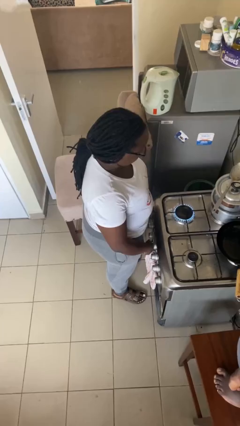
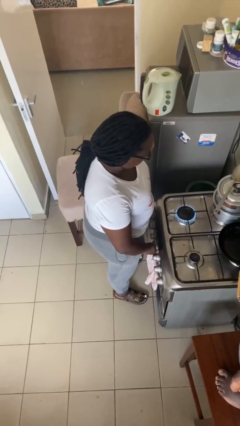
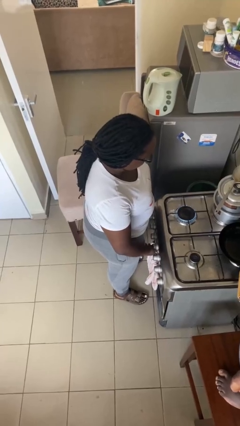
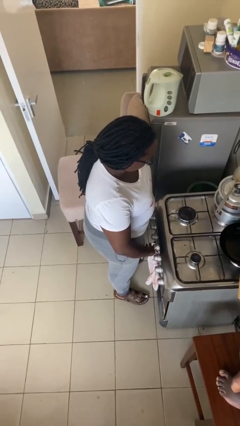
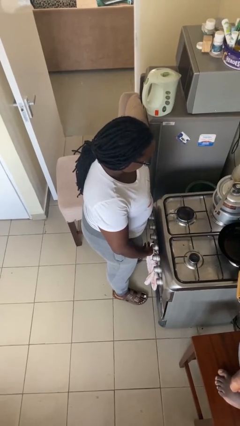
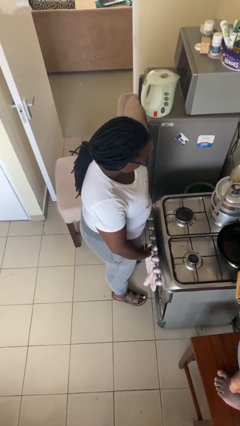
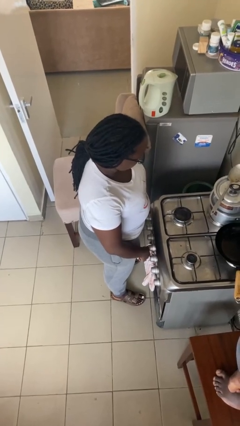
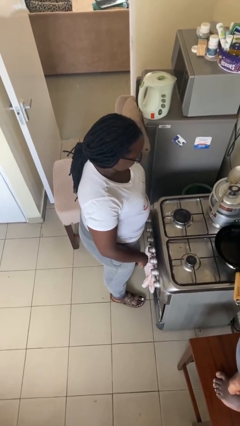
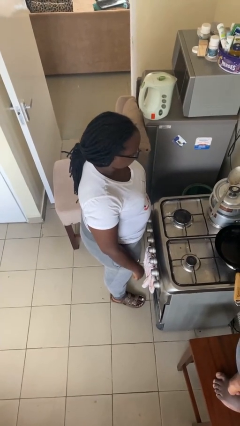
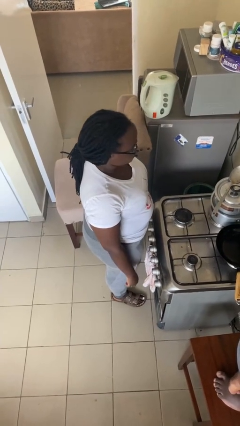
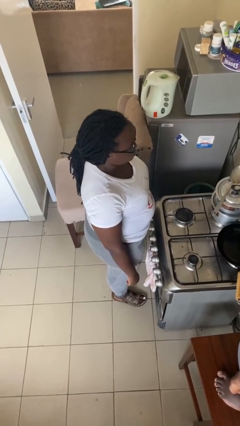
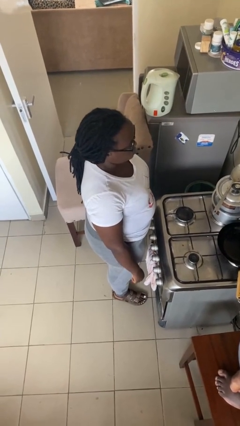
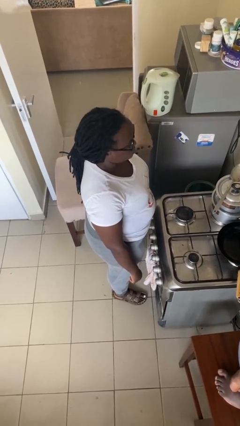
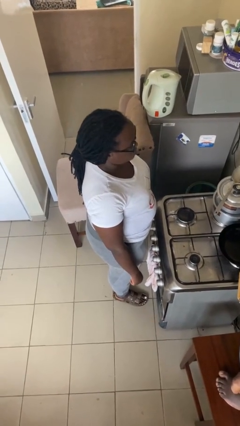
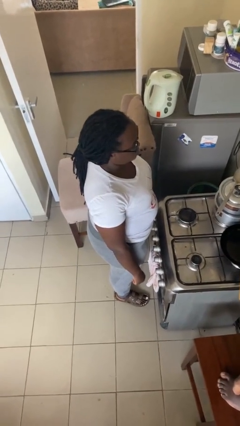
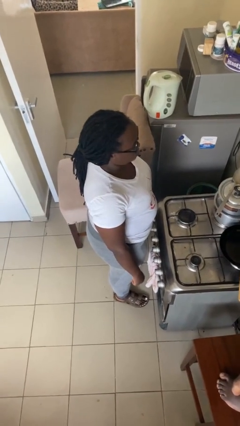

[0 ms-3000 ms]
person turns off stovetop

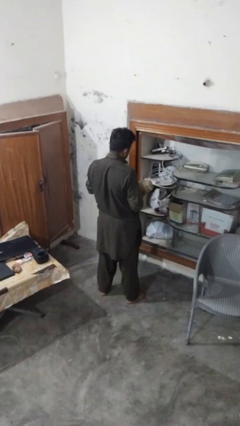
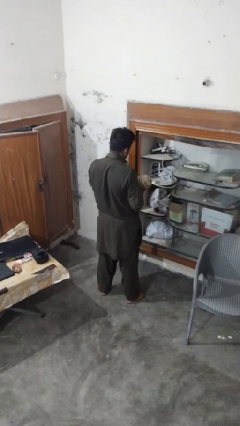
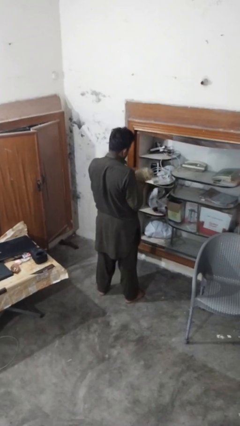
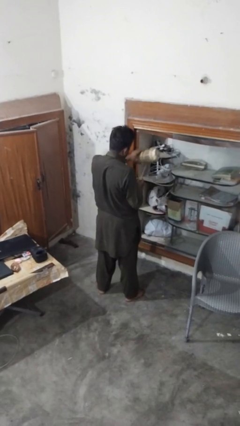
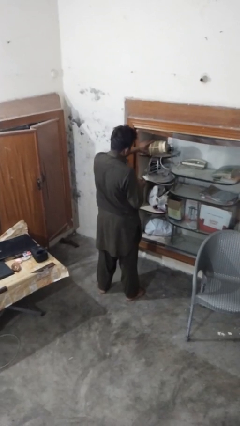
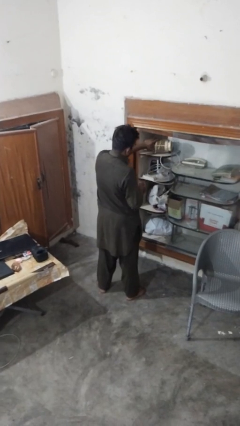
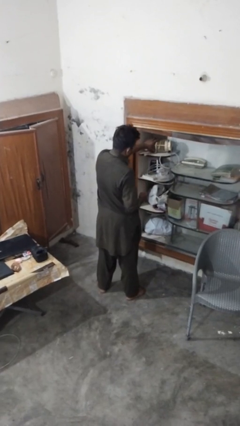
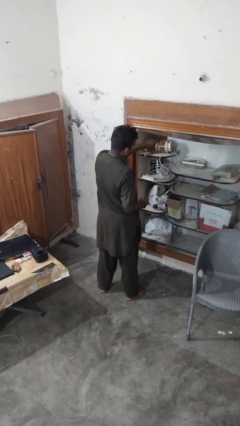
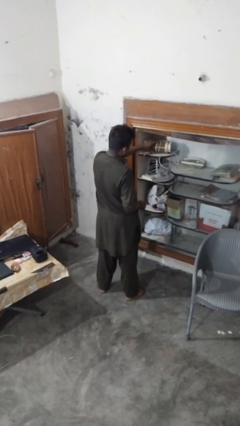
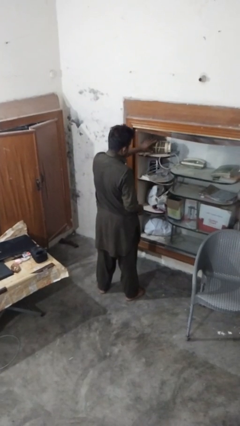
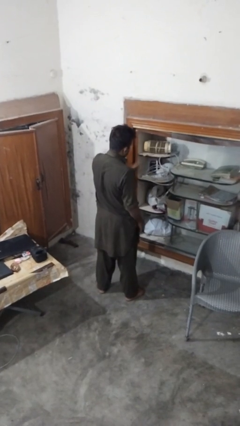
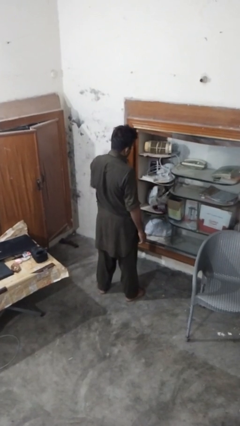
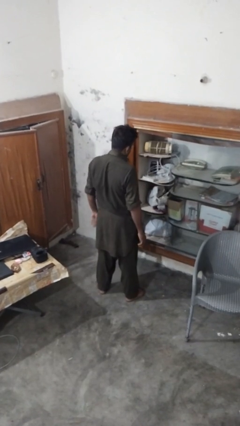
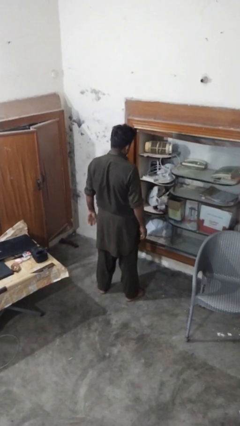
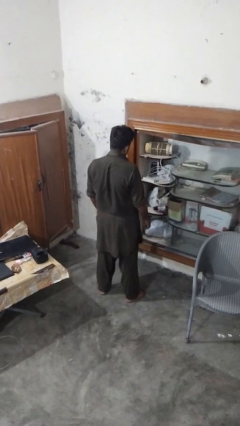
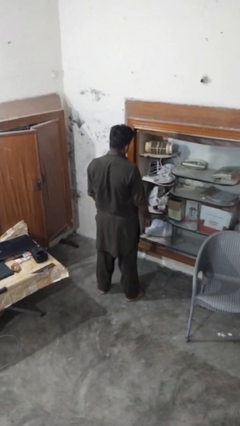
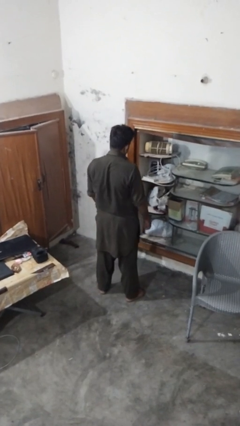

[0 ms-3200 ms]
person puts down object on countertop

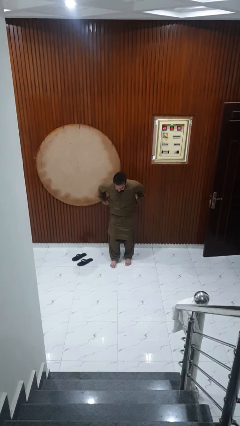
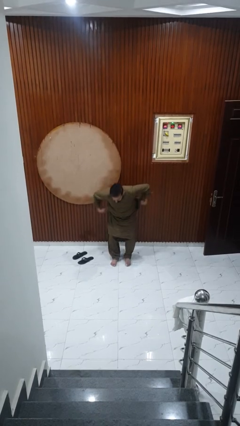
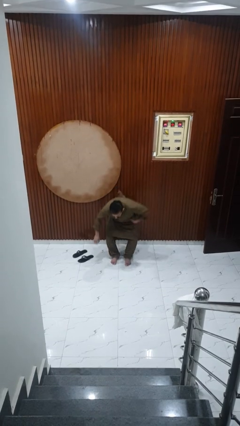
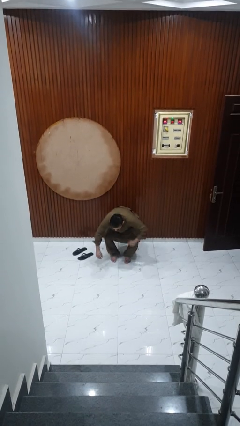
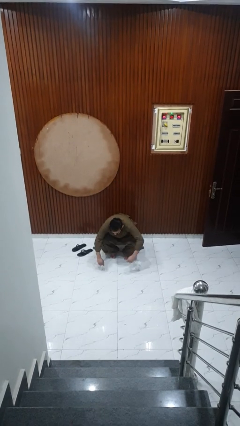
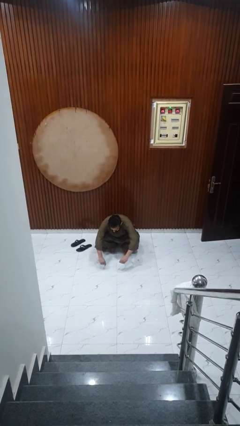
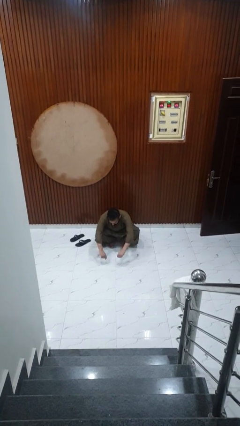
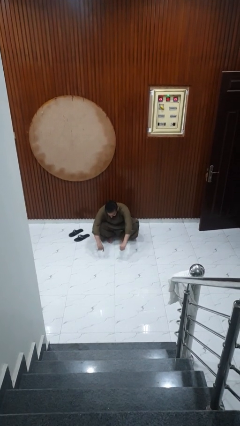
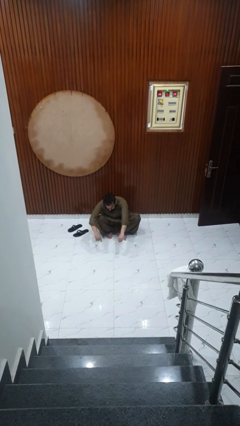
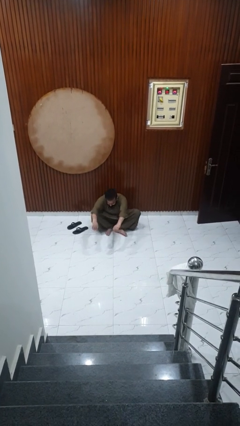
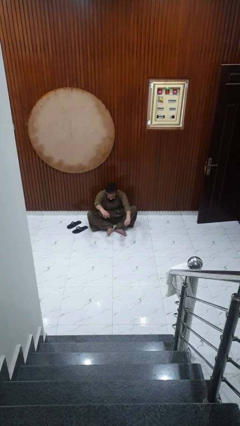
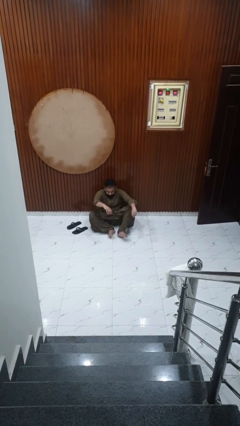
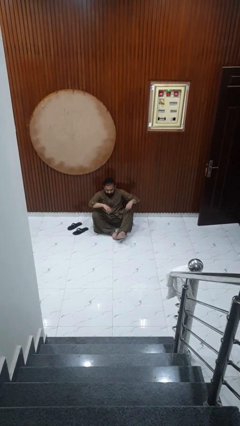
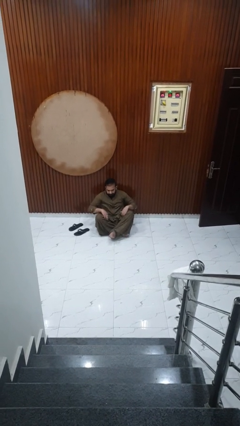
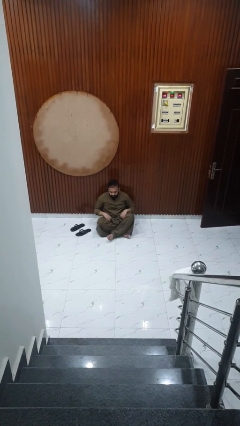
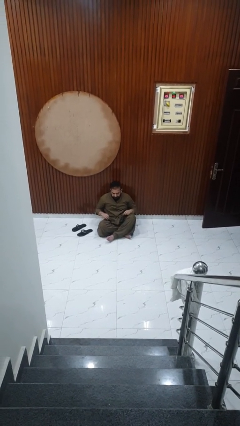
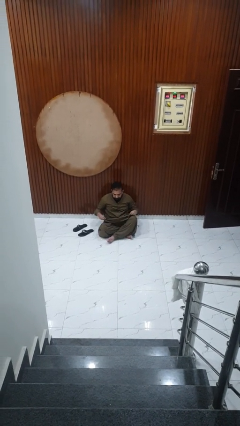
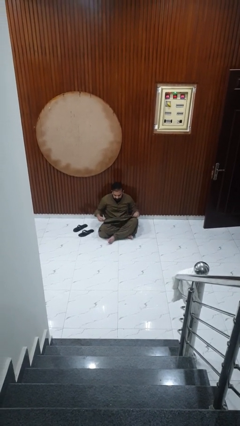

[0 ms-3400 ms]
person sits crisscross

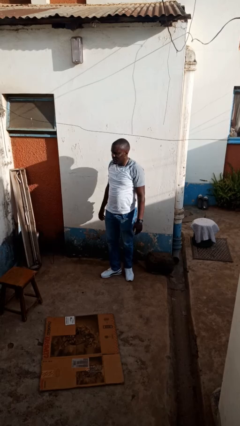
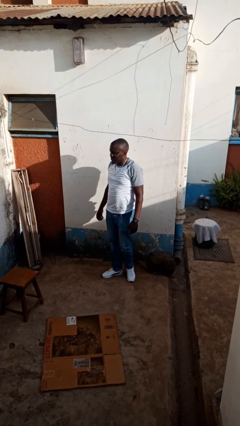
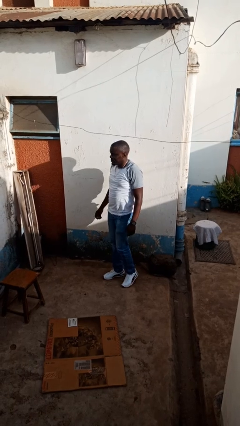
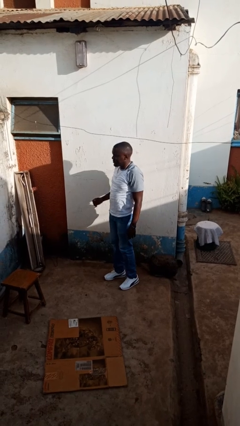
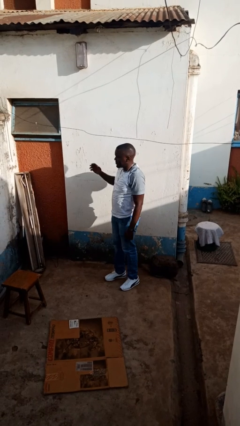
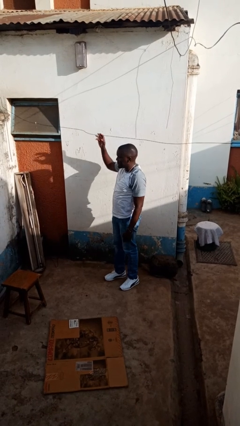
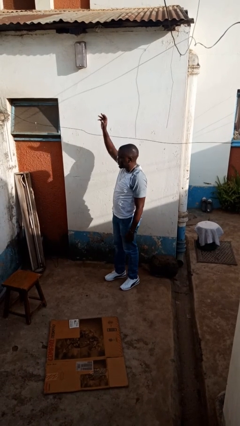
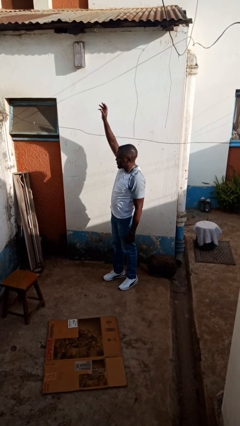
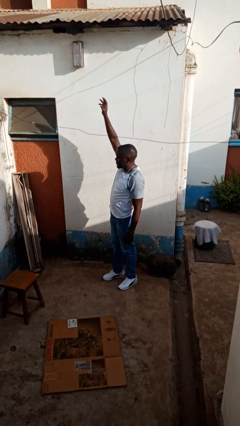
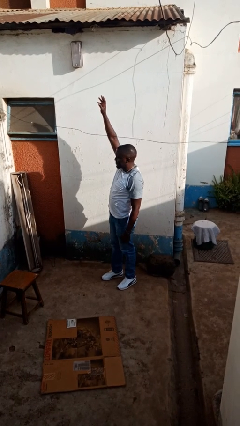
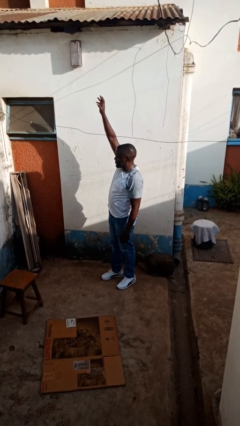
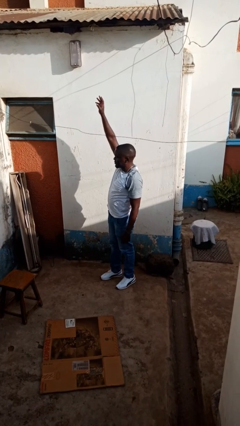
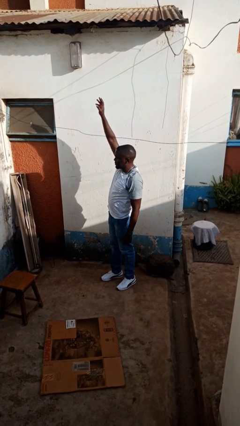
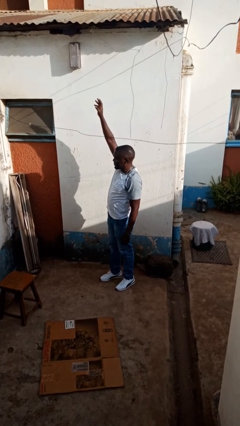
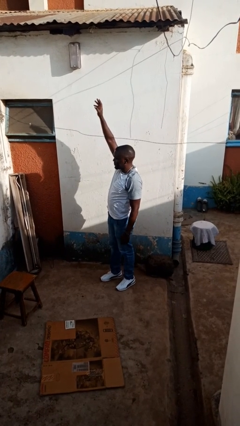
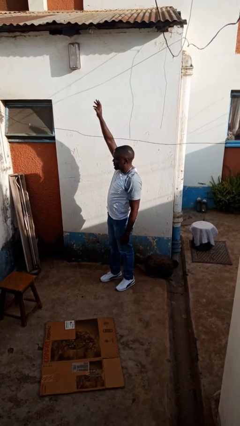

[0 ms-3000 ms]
person gestures raise hand

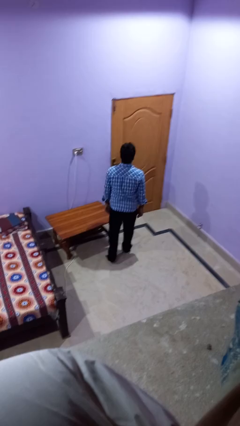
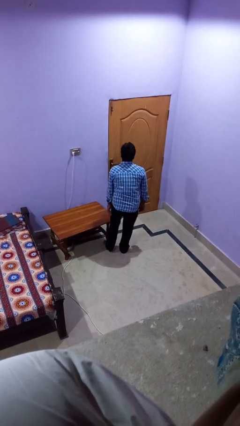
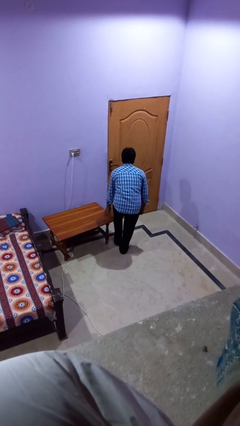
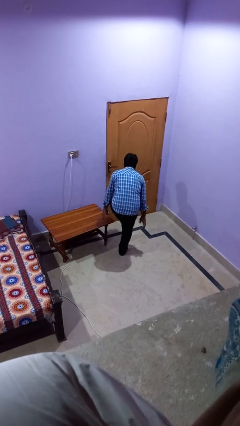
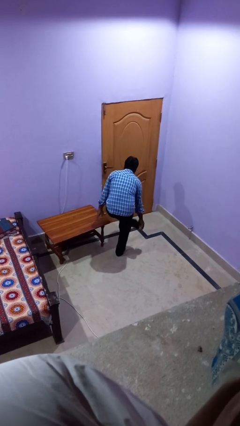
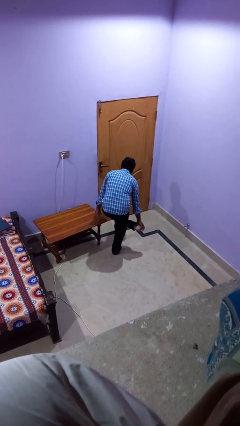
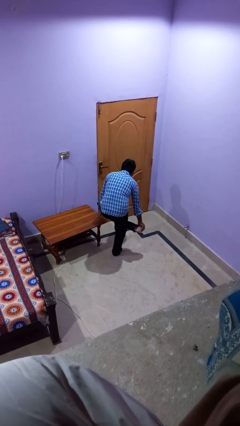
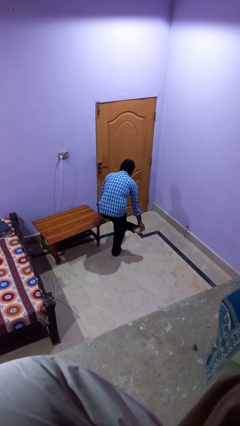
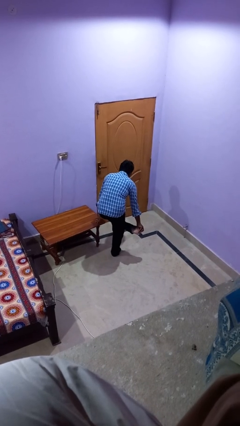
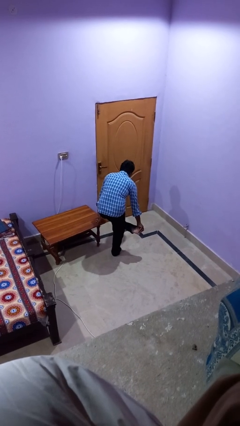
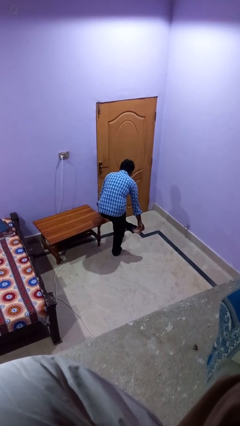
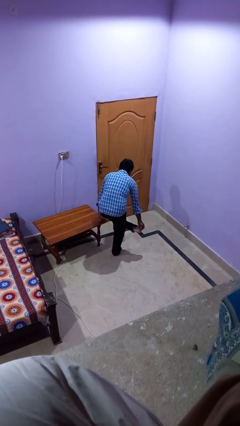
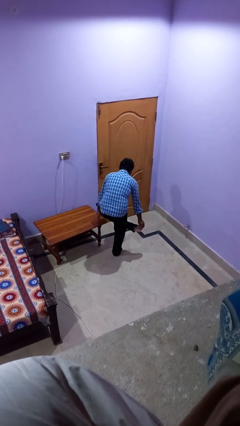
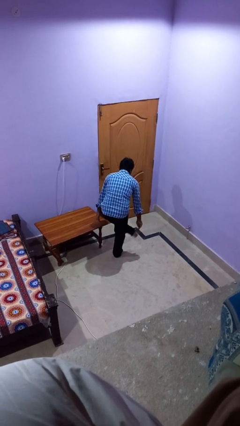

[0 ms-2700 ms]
person stubs toe

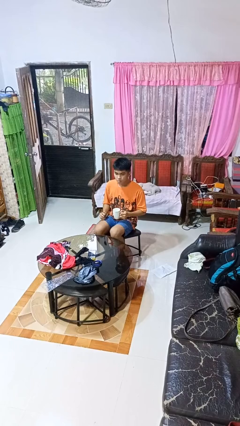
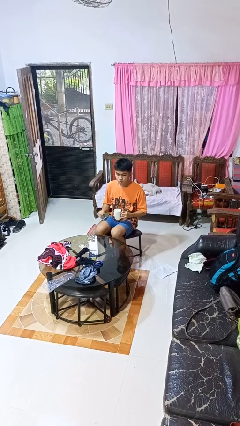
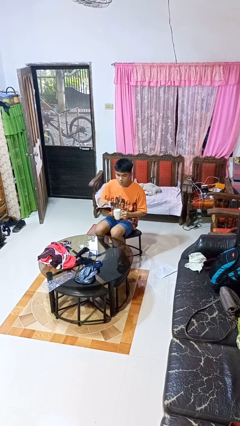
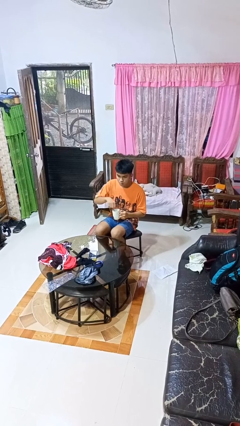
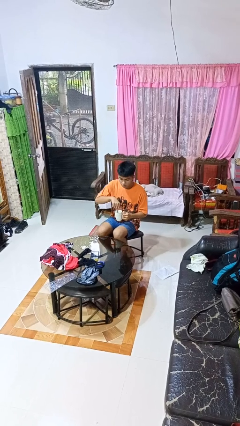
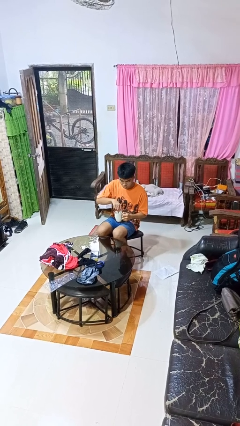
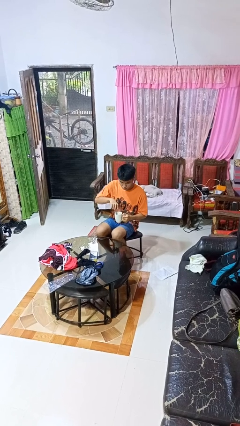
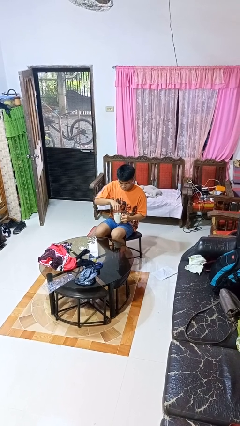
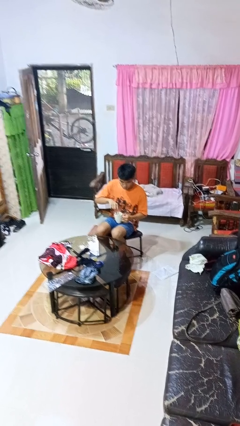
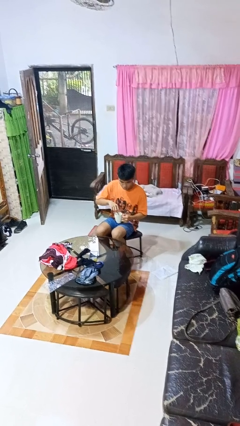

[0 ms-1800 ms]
person stirs mug

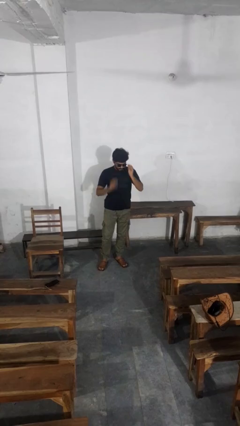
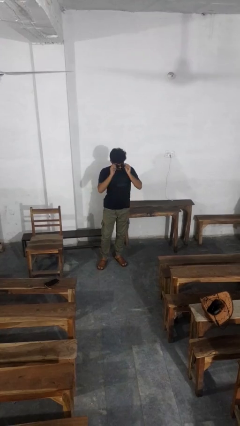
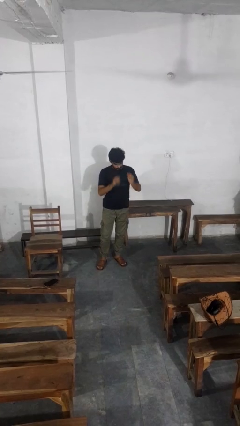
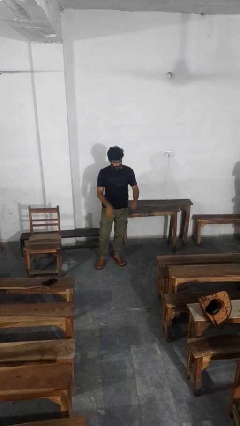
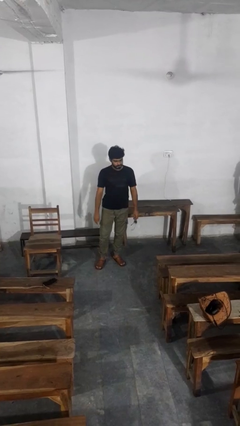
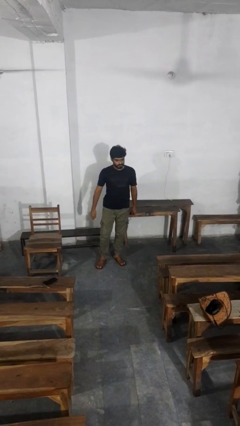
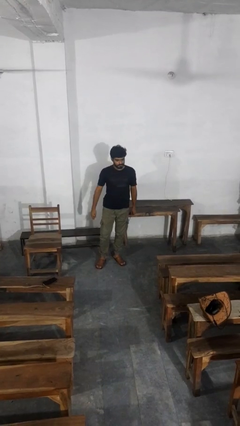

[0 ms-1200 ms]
person takes off sunglasses
